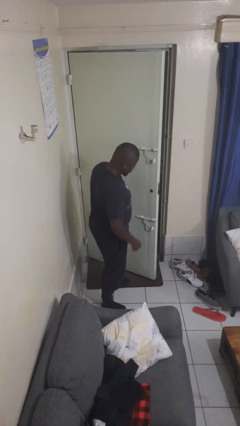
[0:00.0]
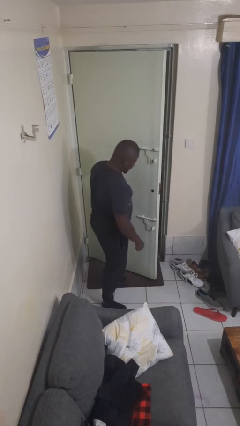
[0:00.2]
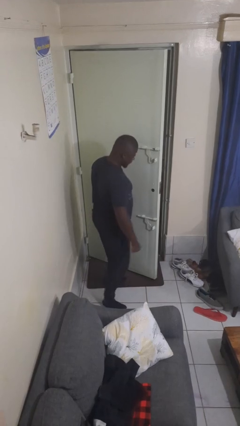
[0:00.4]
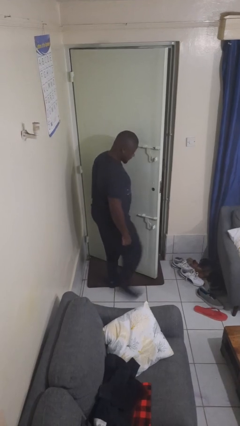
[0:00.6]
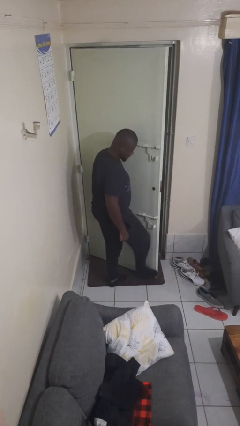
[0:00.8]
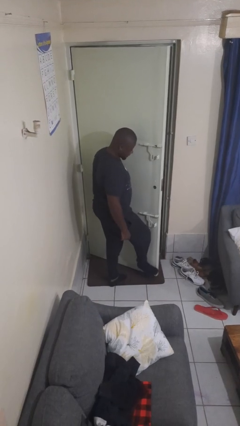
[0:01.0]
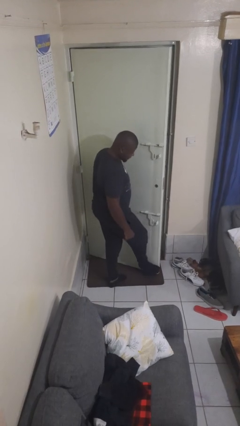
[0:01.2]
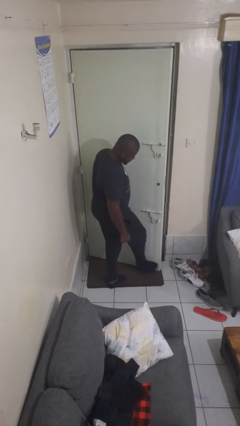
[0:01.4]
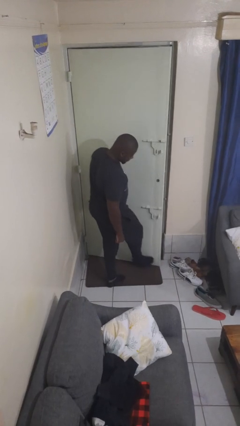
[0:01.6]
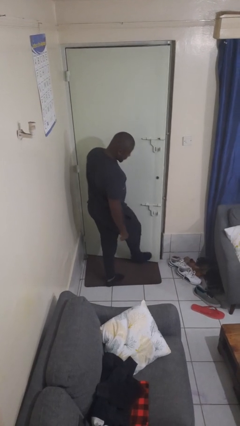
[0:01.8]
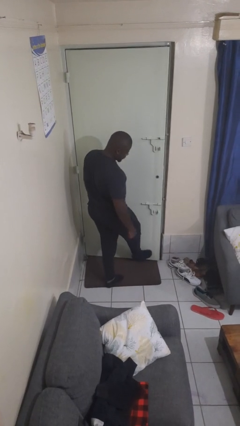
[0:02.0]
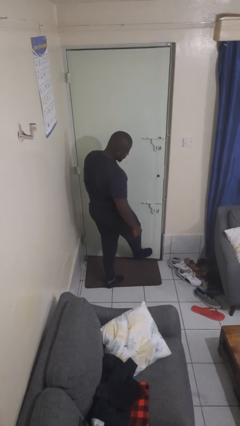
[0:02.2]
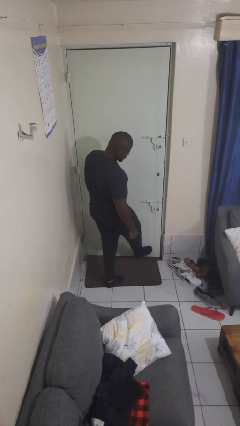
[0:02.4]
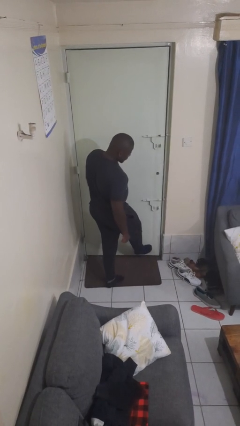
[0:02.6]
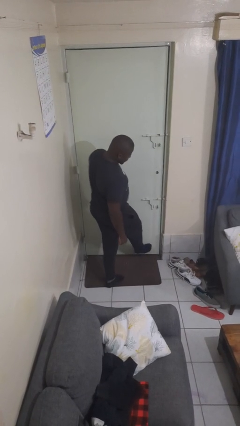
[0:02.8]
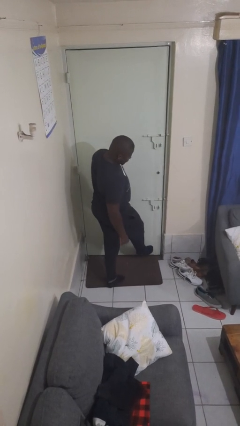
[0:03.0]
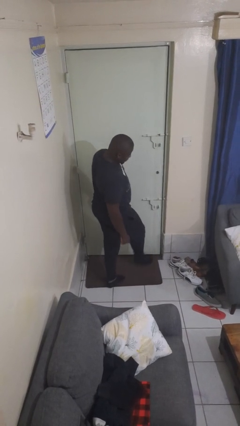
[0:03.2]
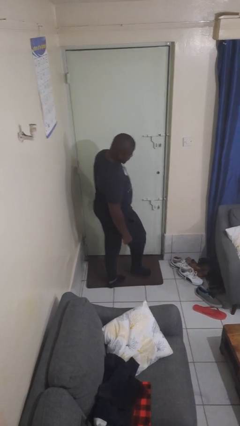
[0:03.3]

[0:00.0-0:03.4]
person closes door with foot

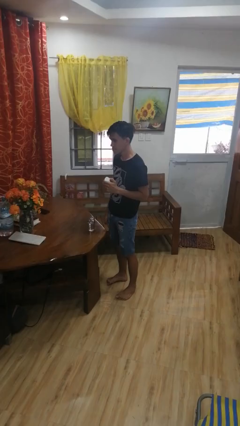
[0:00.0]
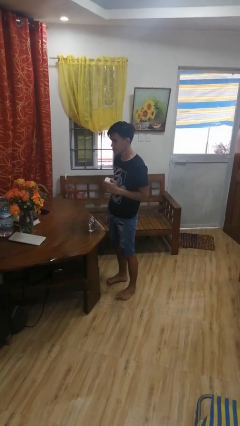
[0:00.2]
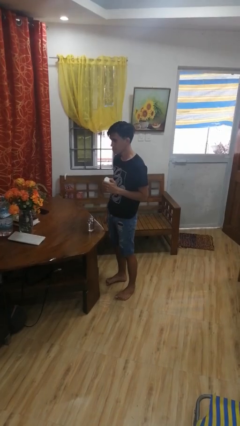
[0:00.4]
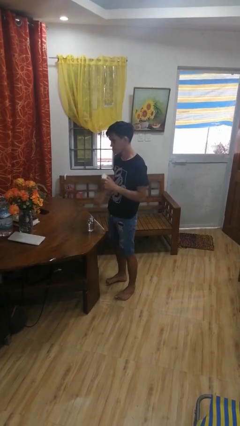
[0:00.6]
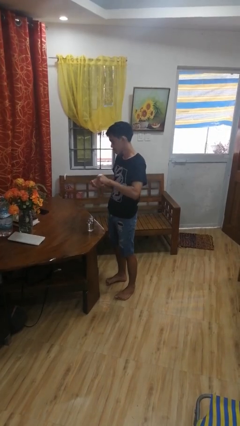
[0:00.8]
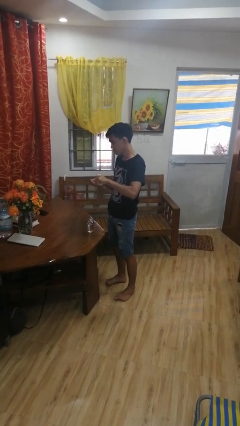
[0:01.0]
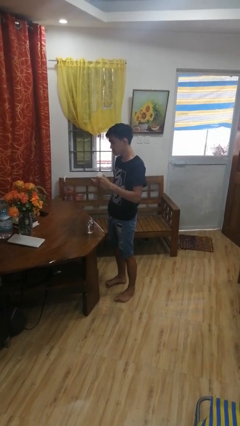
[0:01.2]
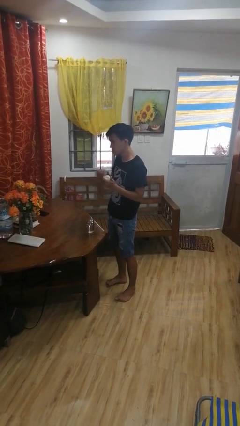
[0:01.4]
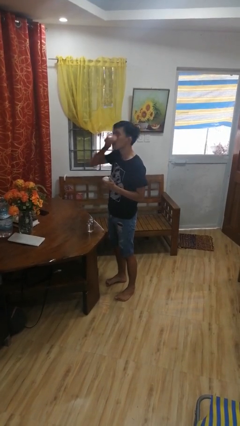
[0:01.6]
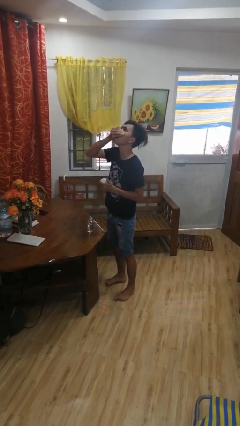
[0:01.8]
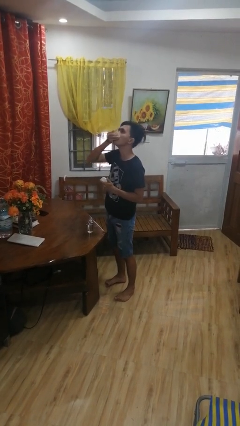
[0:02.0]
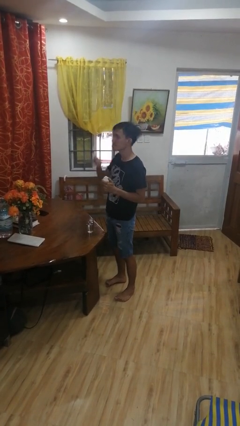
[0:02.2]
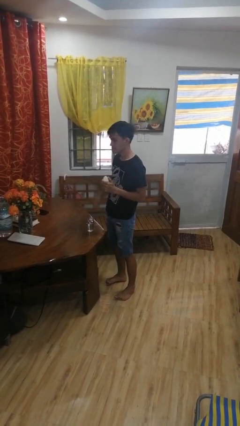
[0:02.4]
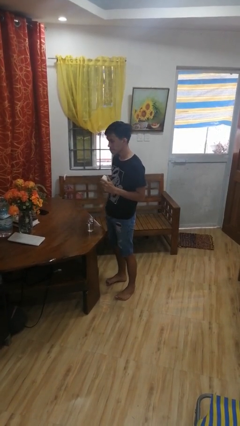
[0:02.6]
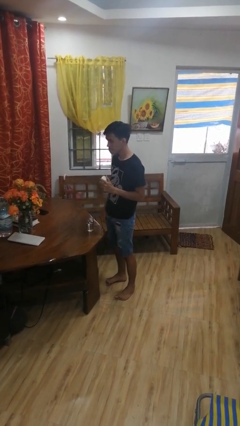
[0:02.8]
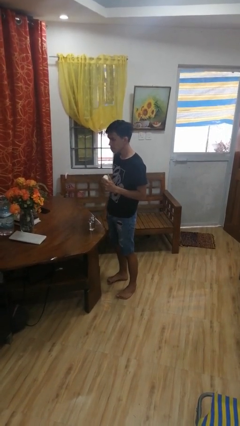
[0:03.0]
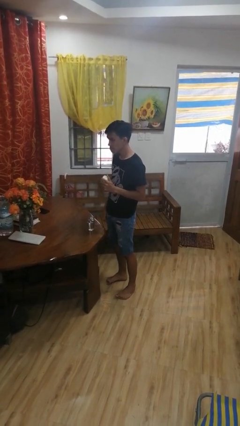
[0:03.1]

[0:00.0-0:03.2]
person takes medicine pills

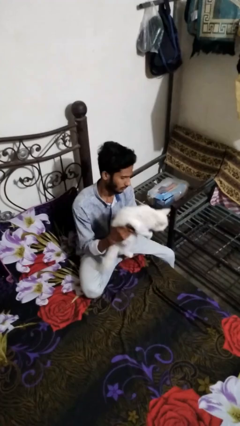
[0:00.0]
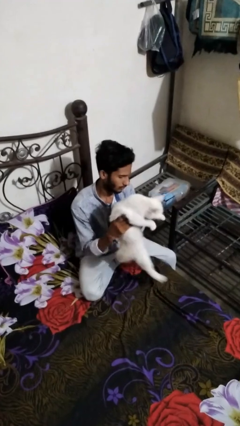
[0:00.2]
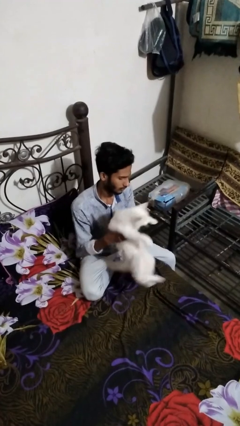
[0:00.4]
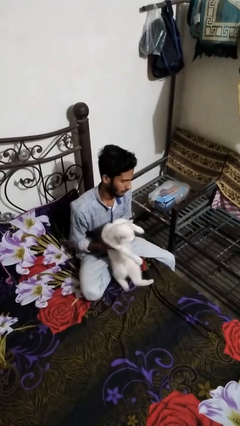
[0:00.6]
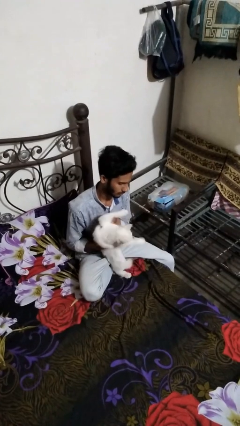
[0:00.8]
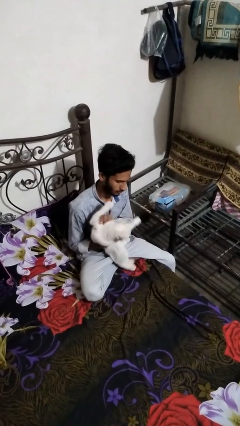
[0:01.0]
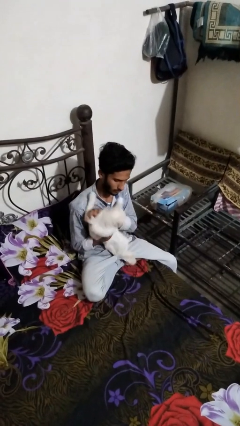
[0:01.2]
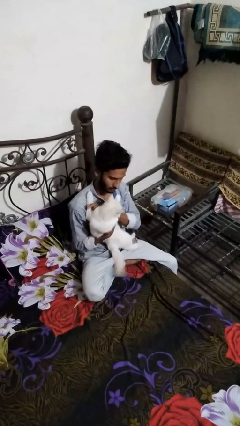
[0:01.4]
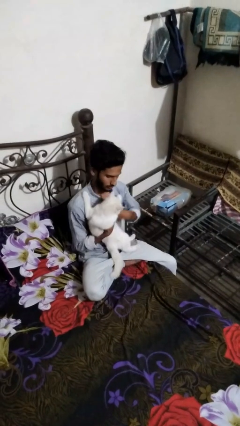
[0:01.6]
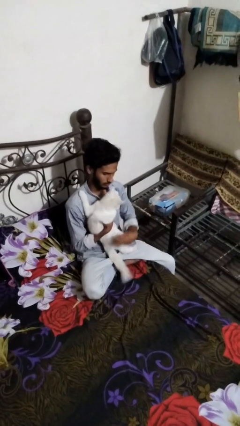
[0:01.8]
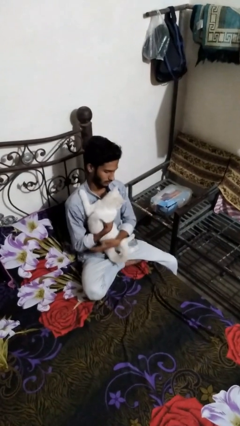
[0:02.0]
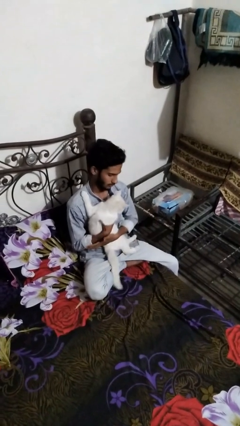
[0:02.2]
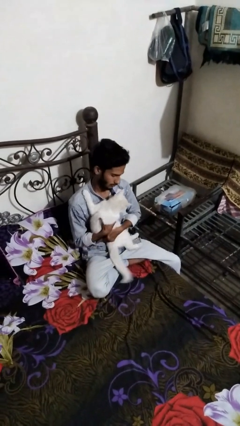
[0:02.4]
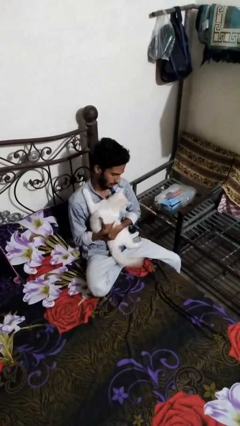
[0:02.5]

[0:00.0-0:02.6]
person hugs cat

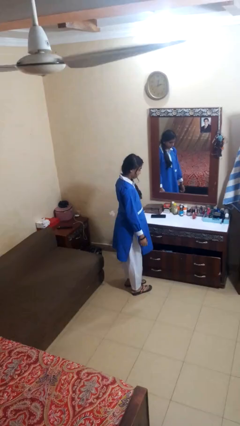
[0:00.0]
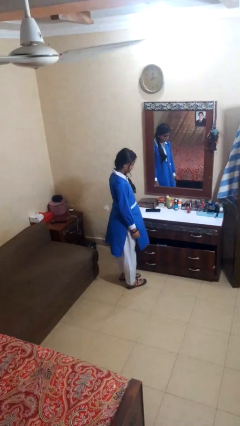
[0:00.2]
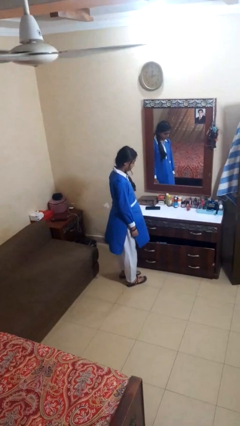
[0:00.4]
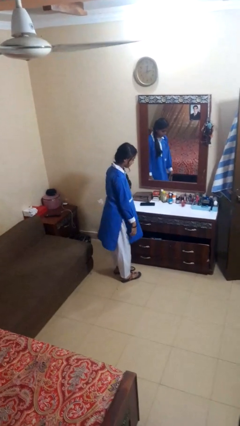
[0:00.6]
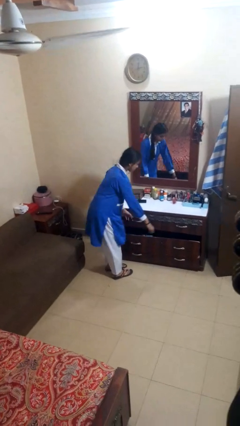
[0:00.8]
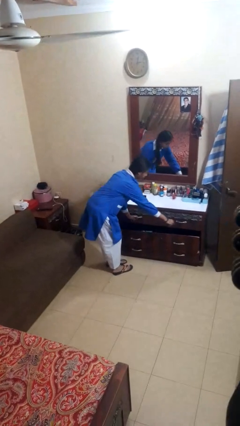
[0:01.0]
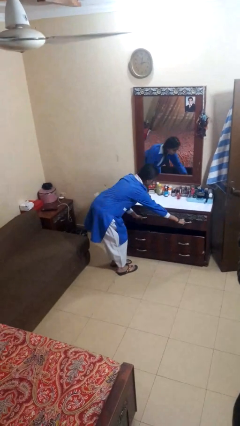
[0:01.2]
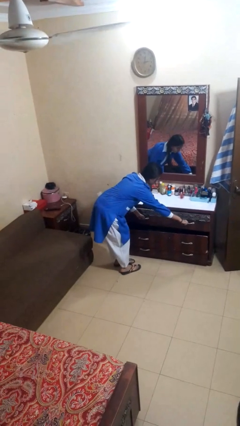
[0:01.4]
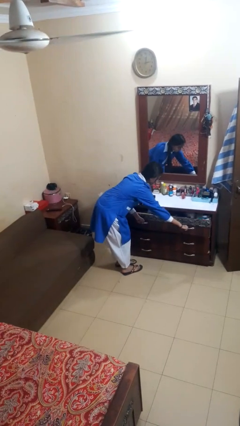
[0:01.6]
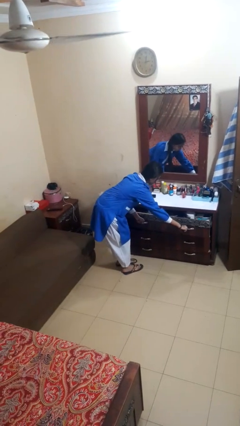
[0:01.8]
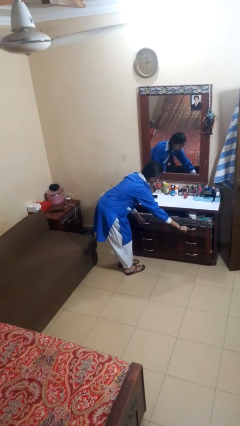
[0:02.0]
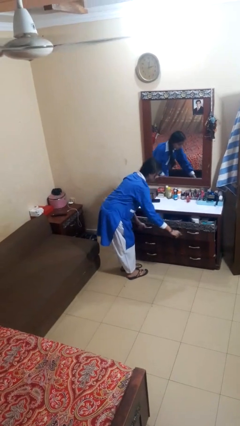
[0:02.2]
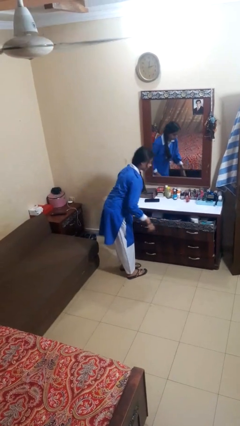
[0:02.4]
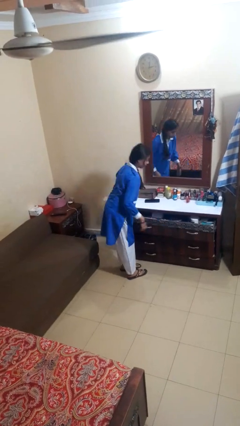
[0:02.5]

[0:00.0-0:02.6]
person opens dresser drawer

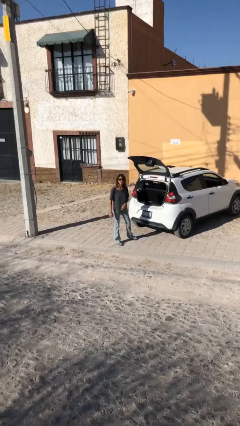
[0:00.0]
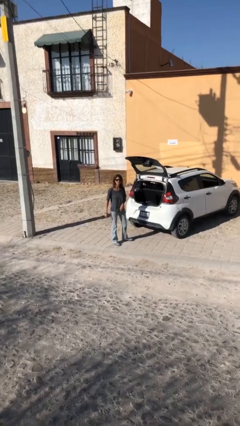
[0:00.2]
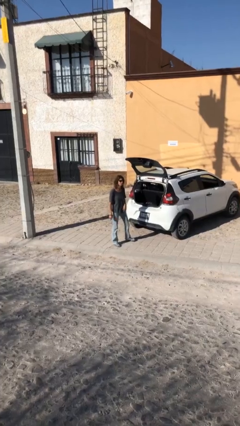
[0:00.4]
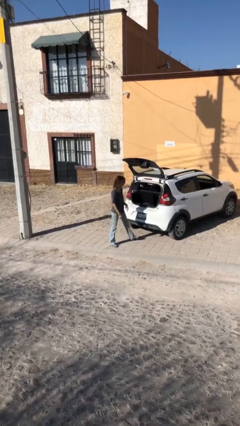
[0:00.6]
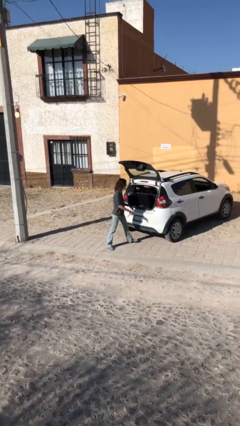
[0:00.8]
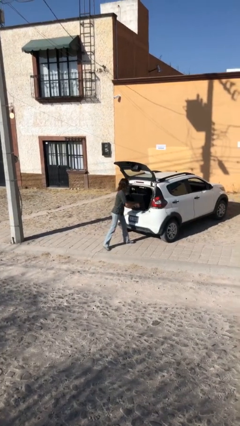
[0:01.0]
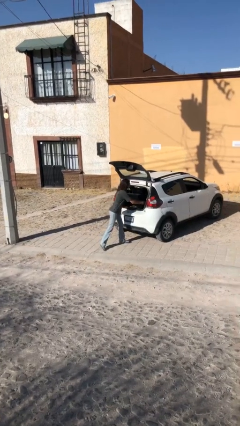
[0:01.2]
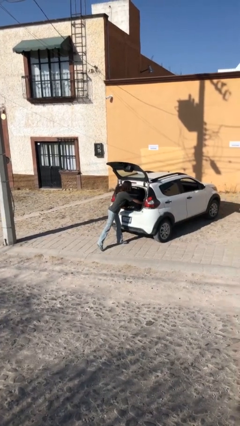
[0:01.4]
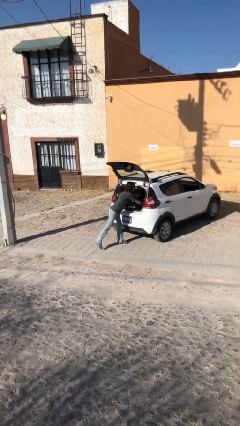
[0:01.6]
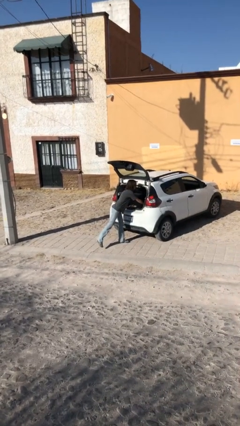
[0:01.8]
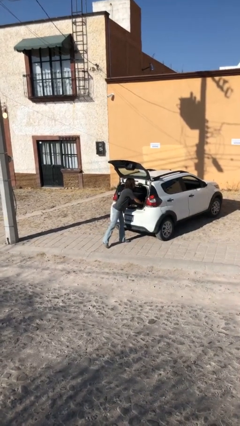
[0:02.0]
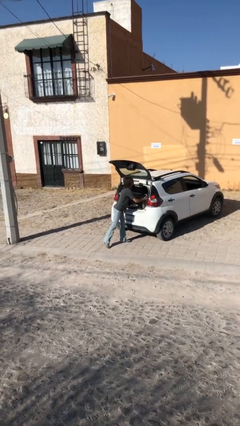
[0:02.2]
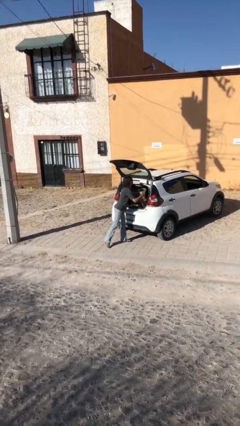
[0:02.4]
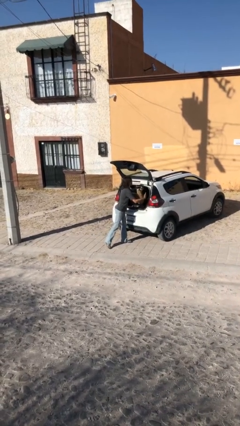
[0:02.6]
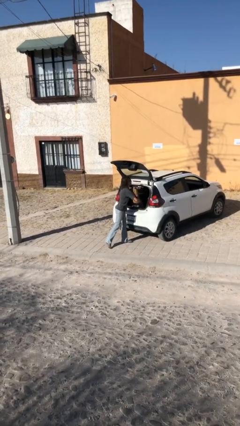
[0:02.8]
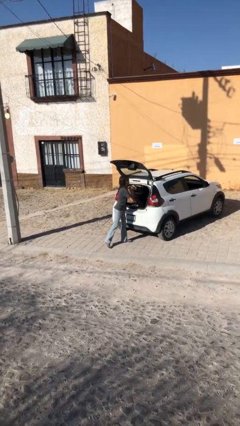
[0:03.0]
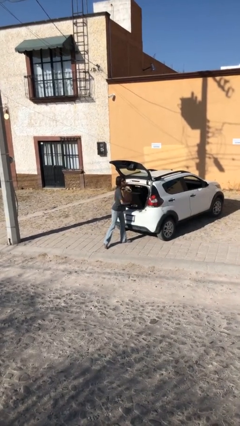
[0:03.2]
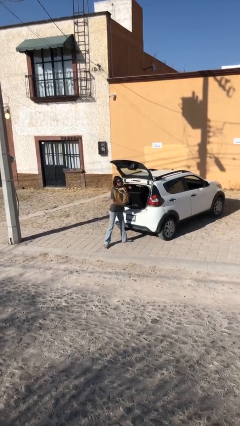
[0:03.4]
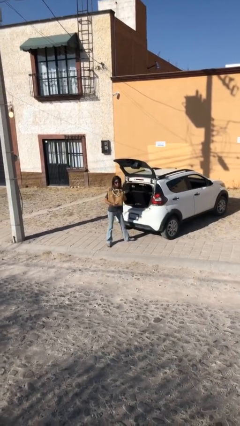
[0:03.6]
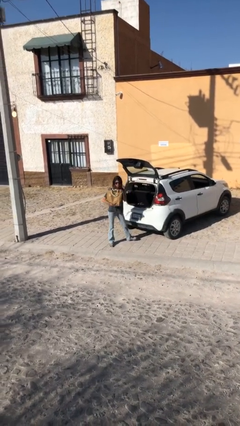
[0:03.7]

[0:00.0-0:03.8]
person unloads car

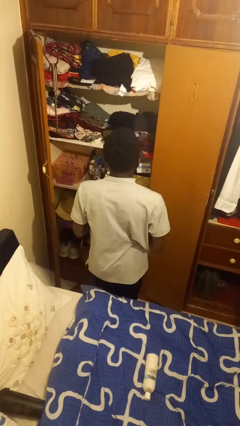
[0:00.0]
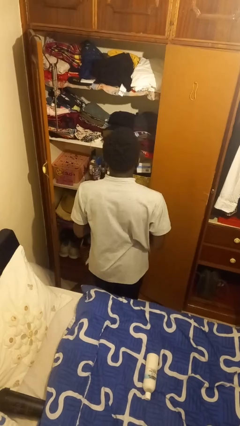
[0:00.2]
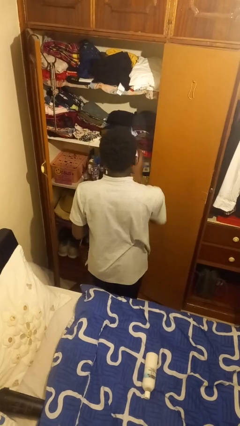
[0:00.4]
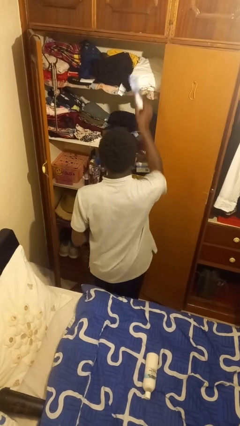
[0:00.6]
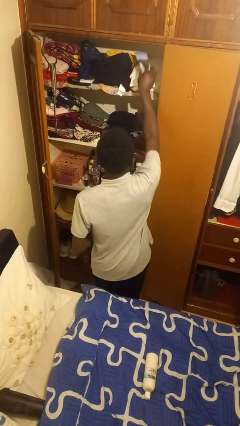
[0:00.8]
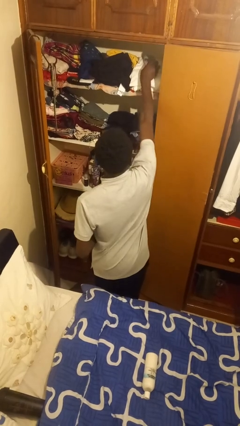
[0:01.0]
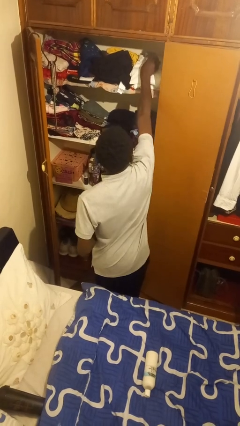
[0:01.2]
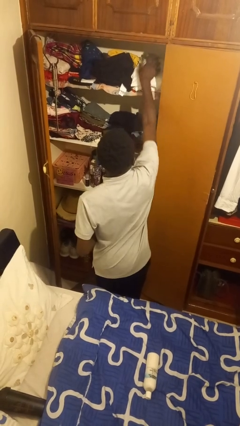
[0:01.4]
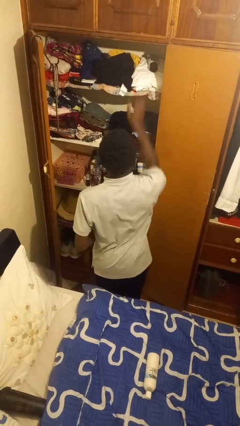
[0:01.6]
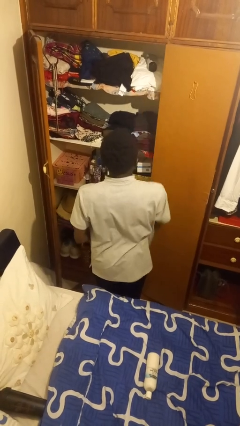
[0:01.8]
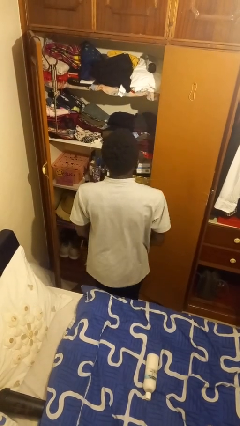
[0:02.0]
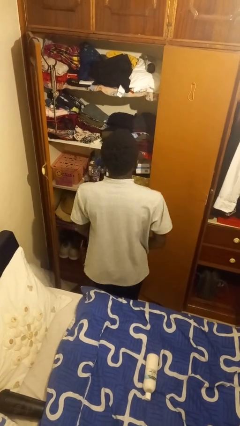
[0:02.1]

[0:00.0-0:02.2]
person puts down object on shelf
